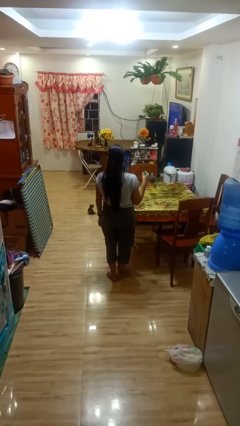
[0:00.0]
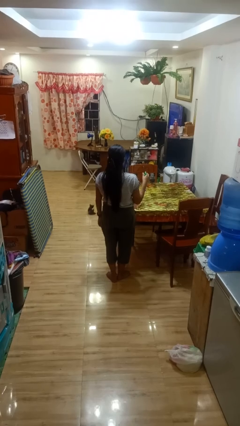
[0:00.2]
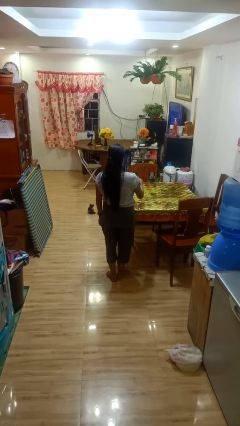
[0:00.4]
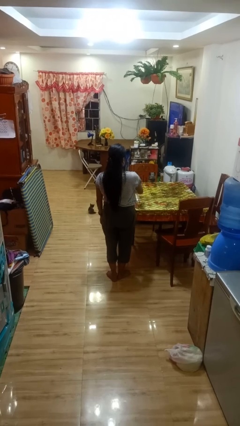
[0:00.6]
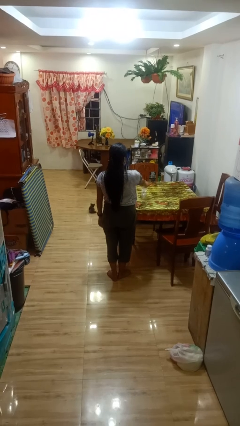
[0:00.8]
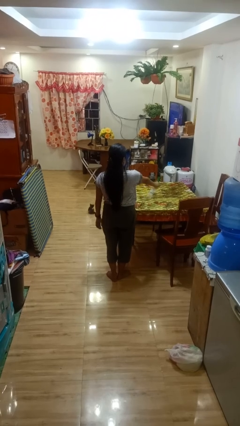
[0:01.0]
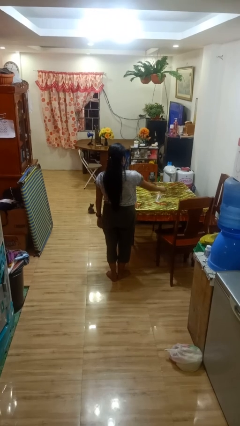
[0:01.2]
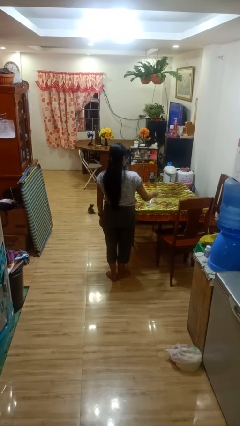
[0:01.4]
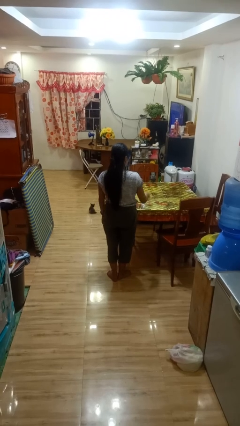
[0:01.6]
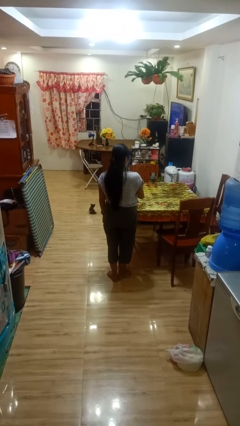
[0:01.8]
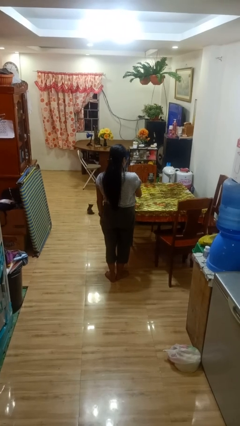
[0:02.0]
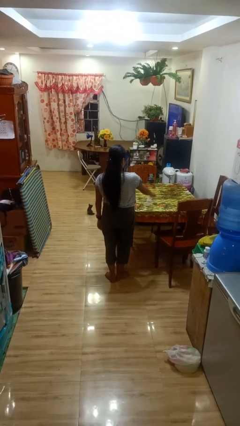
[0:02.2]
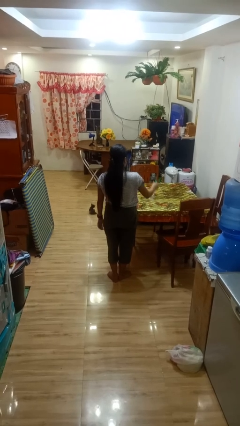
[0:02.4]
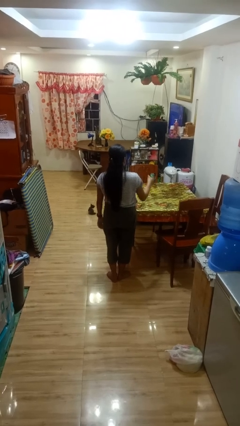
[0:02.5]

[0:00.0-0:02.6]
person sprays from bottle

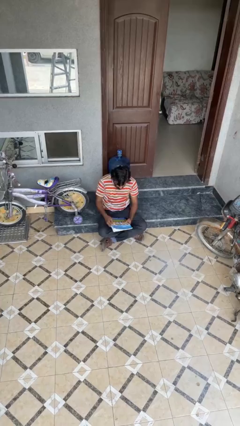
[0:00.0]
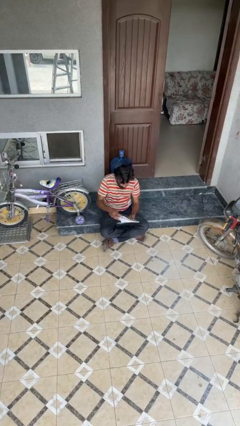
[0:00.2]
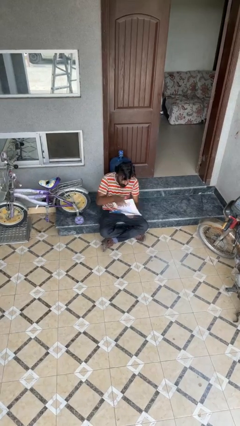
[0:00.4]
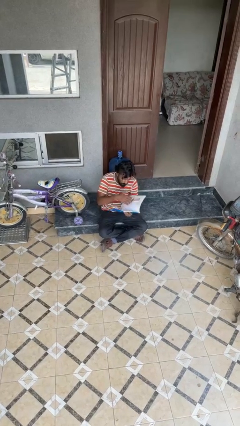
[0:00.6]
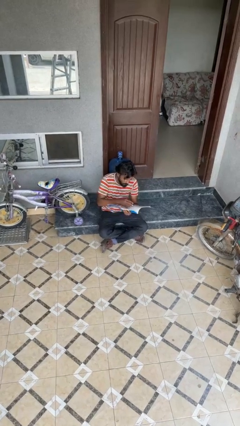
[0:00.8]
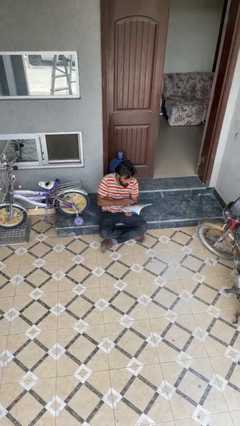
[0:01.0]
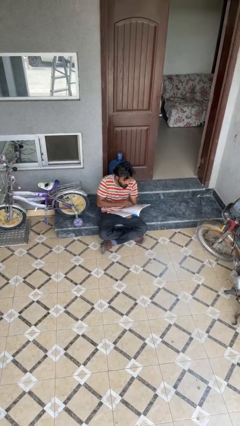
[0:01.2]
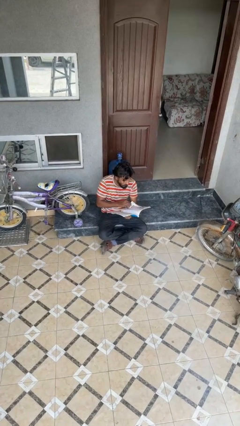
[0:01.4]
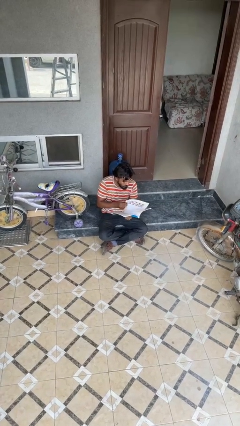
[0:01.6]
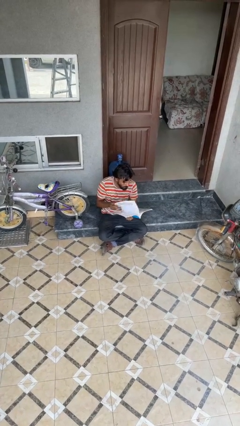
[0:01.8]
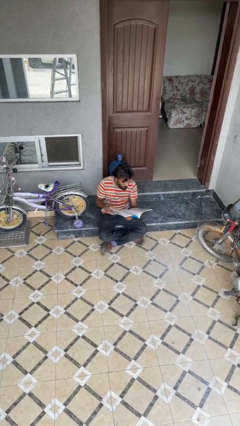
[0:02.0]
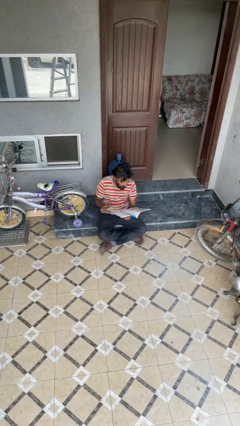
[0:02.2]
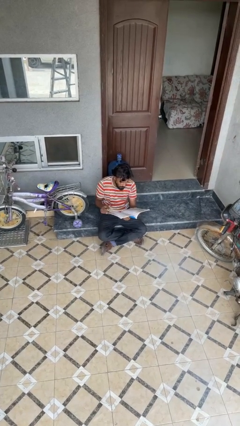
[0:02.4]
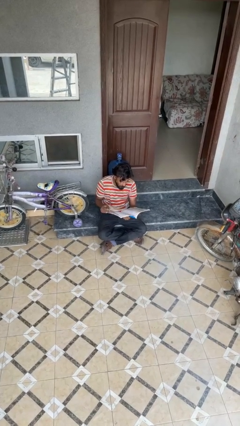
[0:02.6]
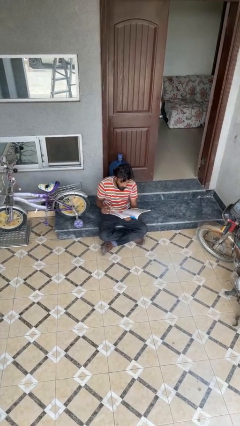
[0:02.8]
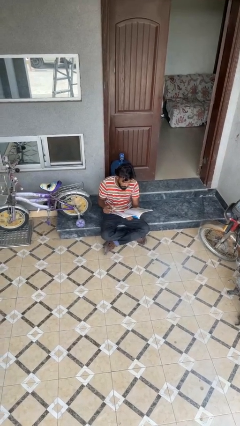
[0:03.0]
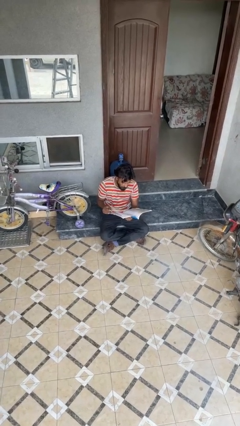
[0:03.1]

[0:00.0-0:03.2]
person reads book

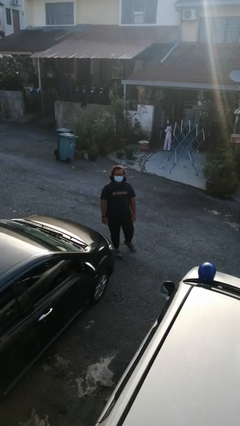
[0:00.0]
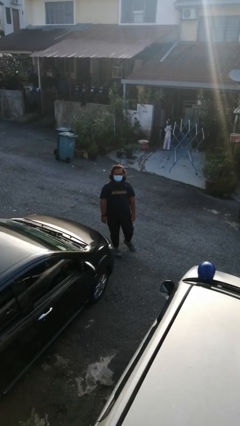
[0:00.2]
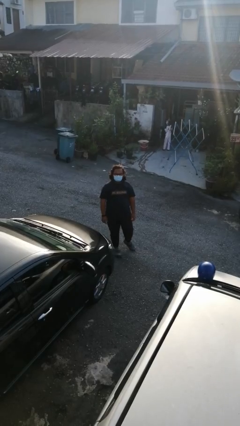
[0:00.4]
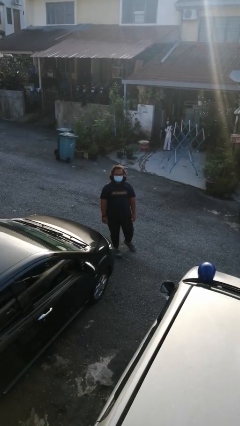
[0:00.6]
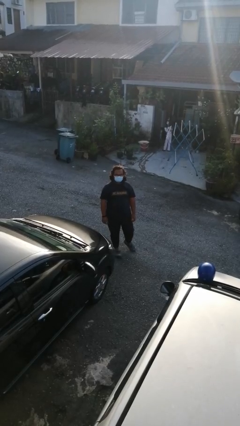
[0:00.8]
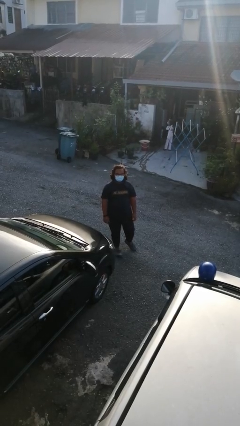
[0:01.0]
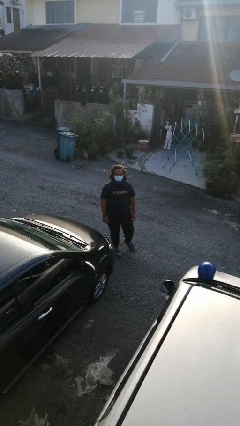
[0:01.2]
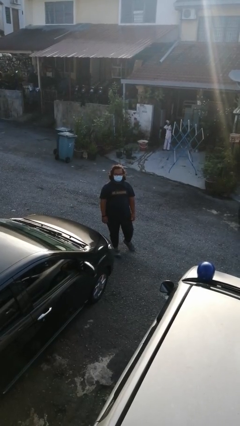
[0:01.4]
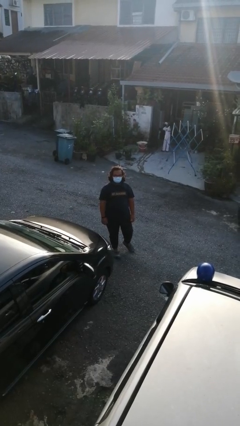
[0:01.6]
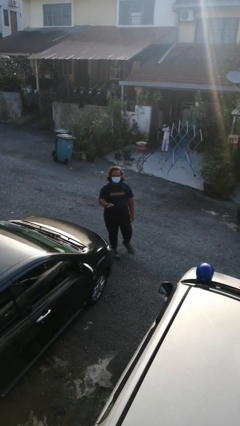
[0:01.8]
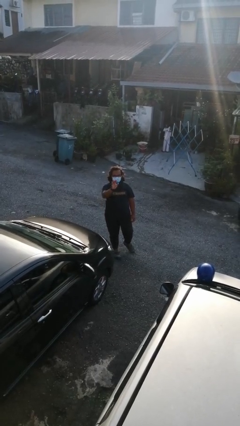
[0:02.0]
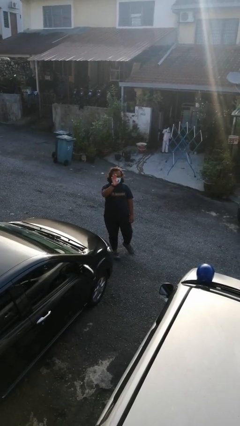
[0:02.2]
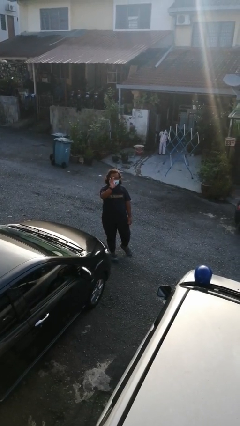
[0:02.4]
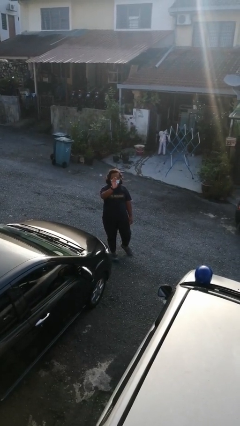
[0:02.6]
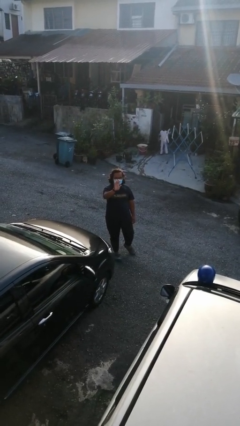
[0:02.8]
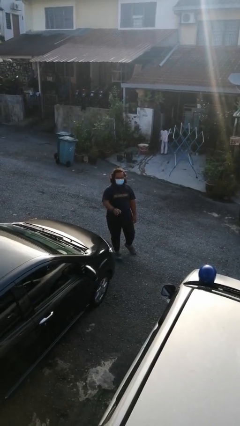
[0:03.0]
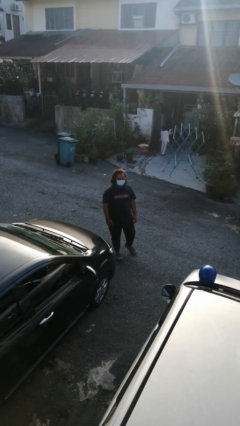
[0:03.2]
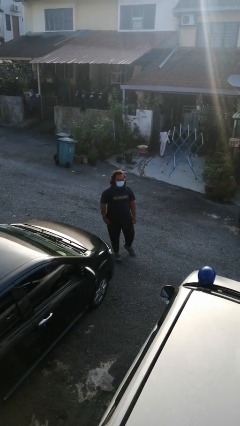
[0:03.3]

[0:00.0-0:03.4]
person waves at person

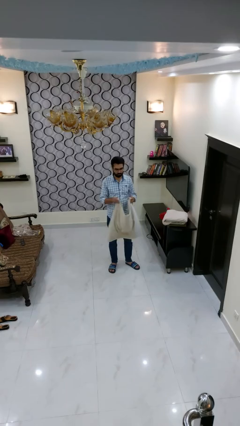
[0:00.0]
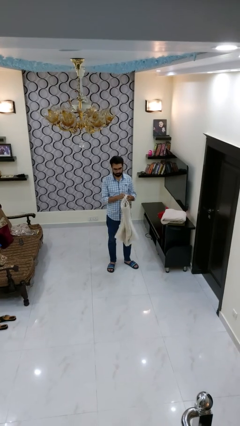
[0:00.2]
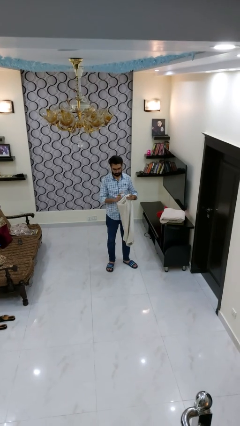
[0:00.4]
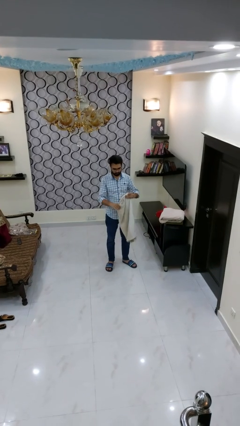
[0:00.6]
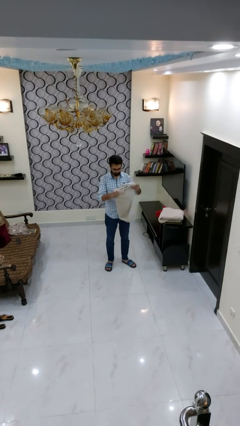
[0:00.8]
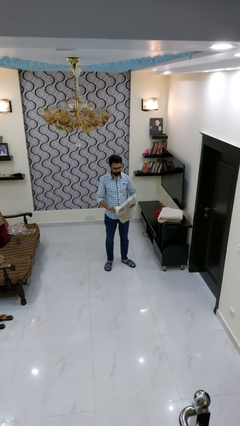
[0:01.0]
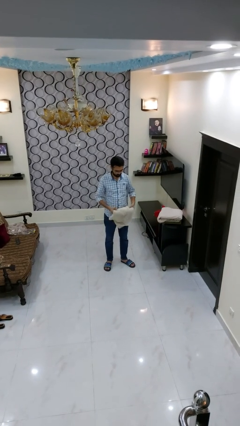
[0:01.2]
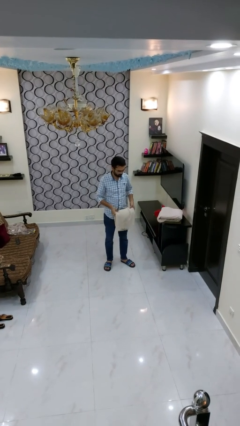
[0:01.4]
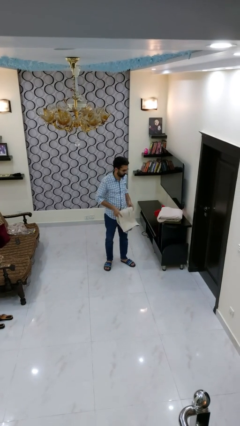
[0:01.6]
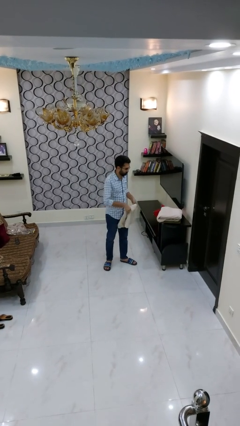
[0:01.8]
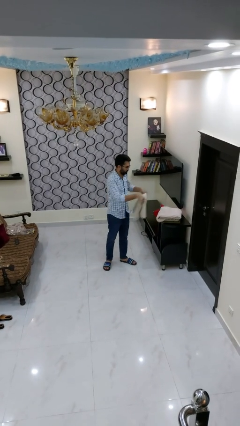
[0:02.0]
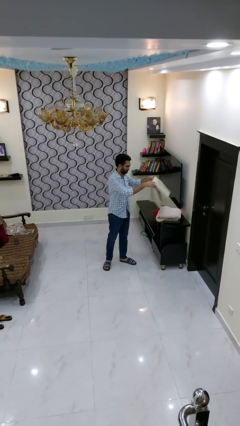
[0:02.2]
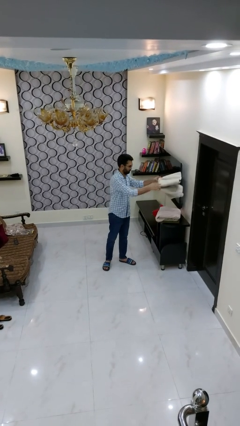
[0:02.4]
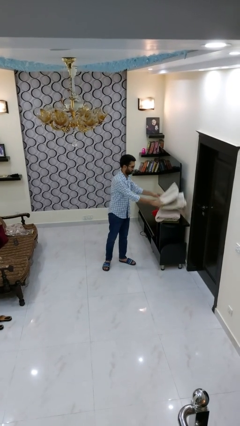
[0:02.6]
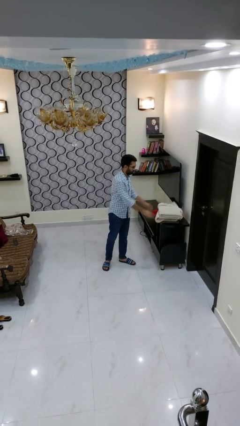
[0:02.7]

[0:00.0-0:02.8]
person folds towel

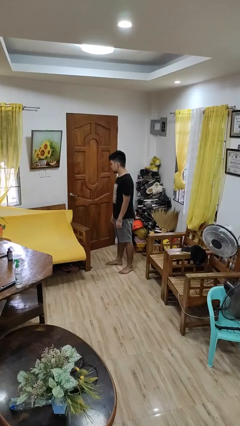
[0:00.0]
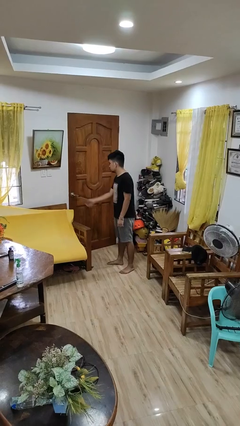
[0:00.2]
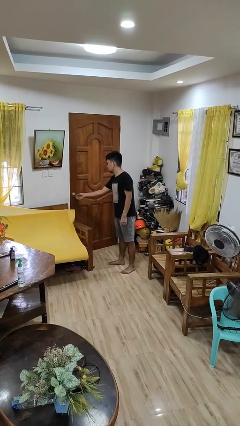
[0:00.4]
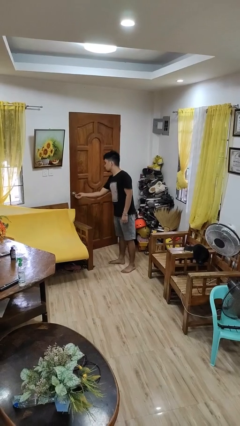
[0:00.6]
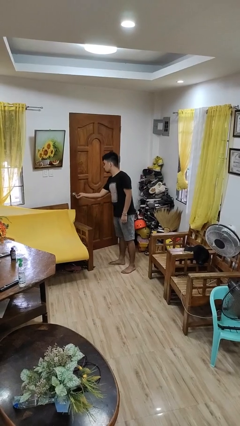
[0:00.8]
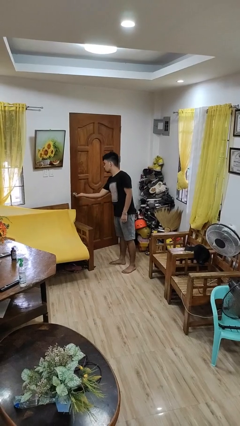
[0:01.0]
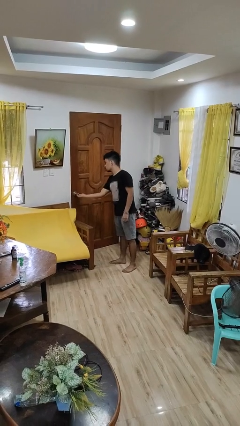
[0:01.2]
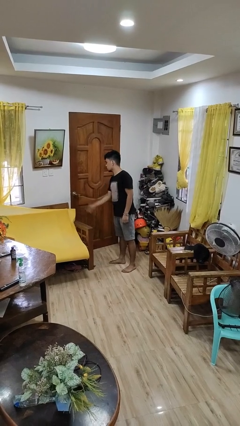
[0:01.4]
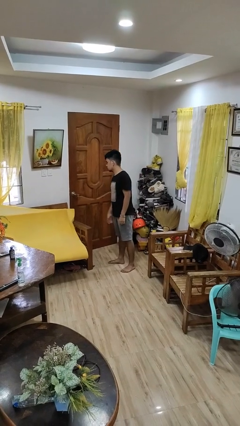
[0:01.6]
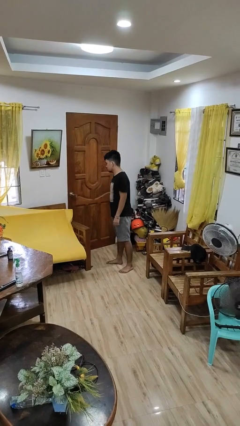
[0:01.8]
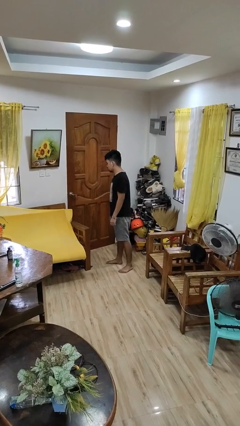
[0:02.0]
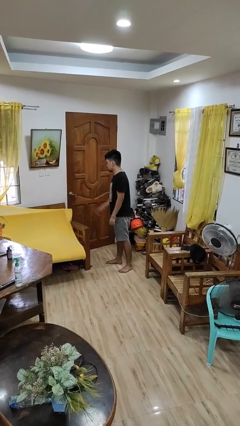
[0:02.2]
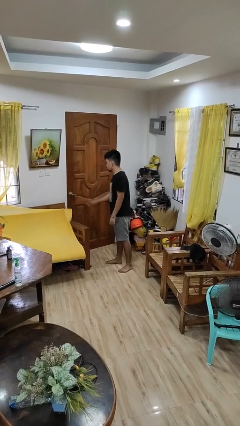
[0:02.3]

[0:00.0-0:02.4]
person unlocks door with keys

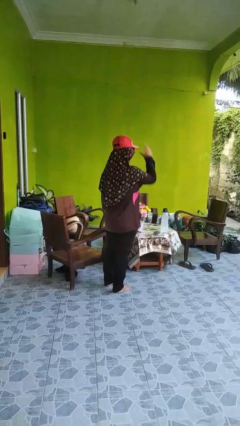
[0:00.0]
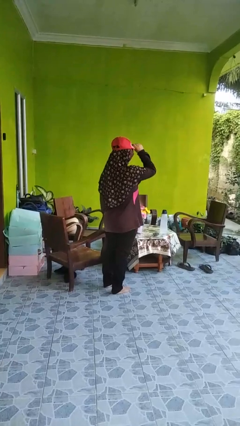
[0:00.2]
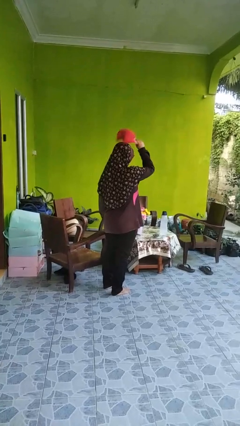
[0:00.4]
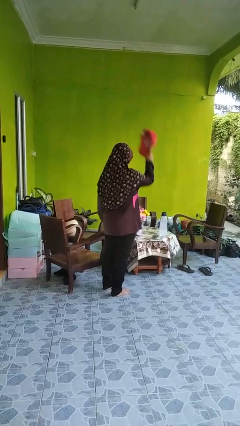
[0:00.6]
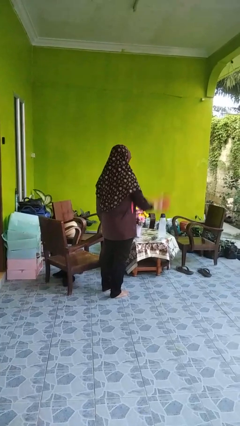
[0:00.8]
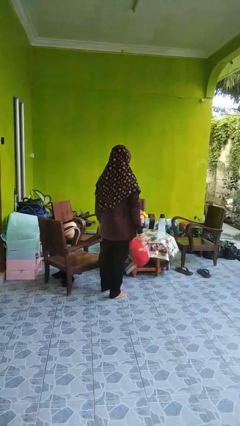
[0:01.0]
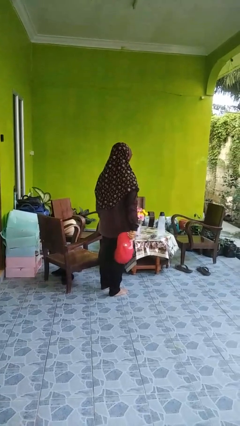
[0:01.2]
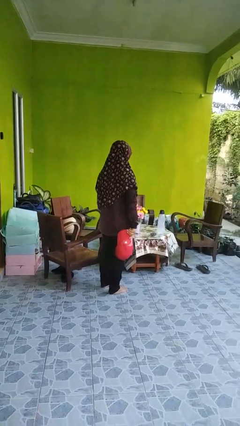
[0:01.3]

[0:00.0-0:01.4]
person takes off hat

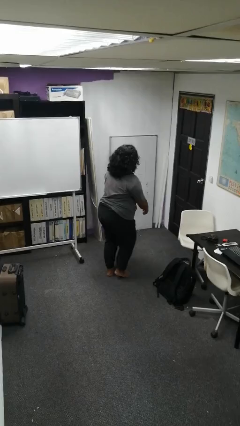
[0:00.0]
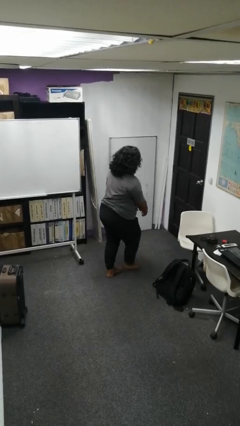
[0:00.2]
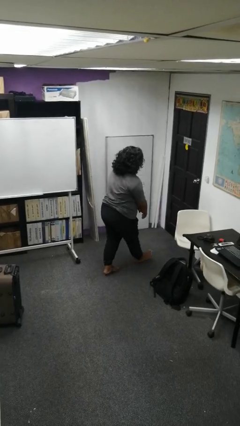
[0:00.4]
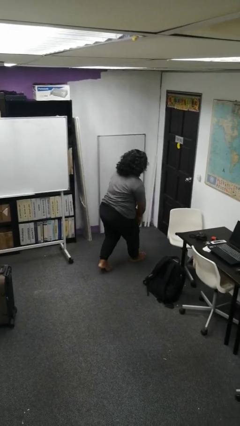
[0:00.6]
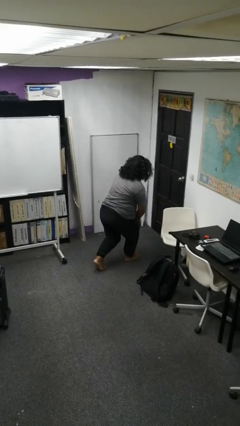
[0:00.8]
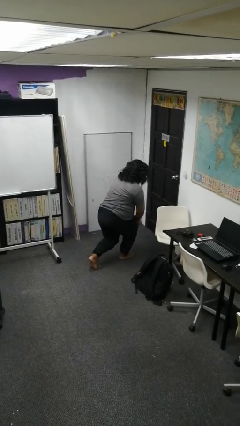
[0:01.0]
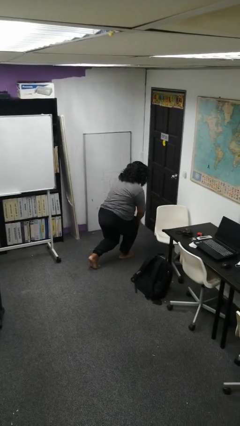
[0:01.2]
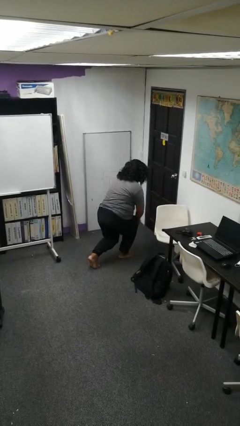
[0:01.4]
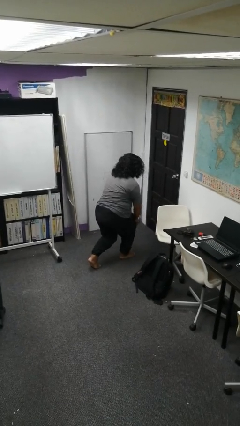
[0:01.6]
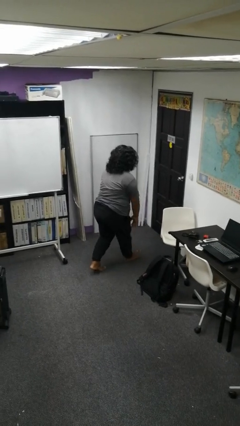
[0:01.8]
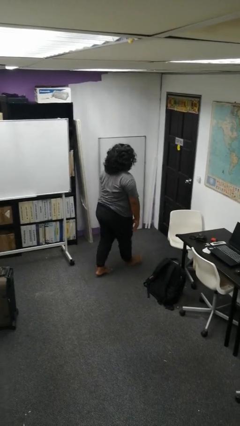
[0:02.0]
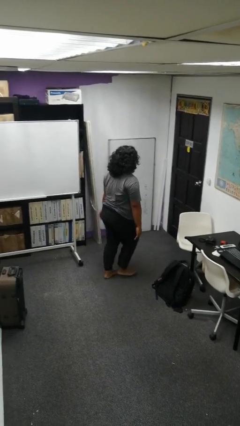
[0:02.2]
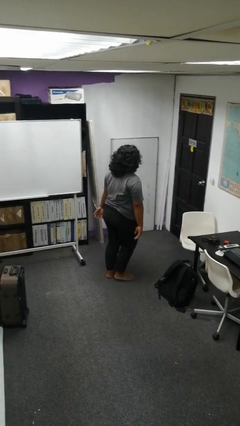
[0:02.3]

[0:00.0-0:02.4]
person exercises with lunges
